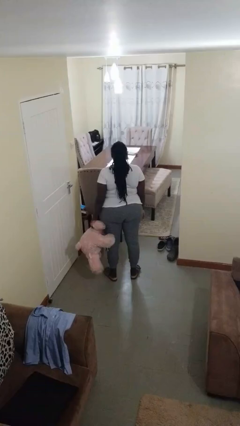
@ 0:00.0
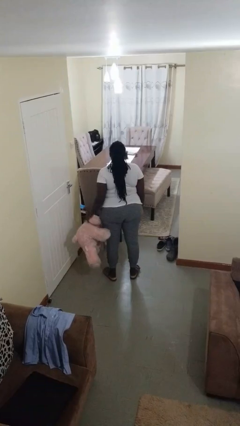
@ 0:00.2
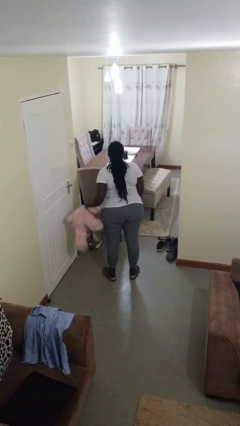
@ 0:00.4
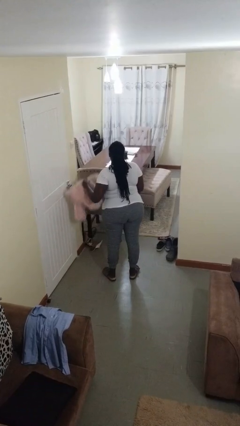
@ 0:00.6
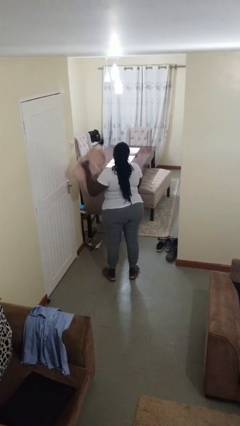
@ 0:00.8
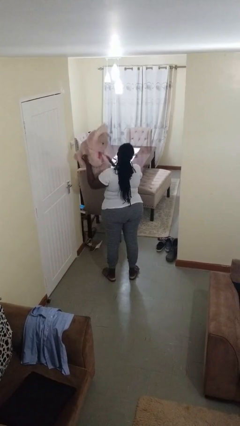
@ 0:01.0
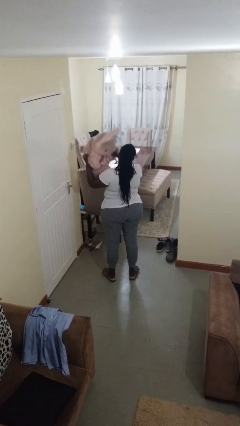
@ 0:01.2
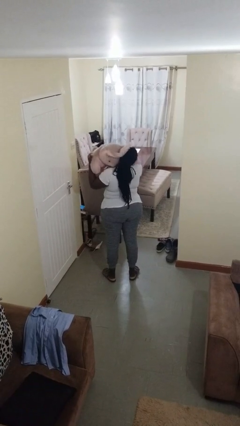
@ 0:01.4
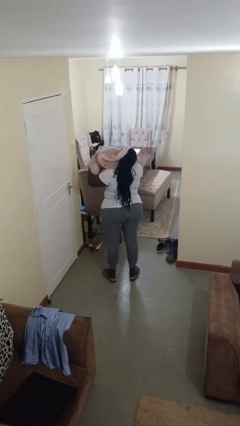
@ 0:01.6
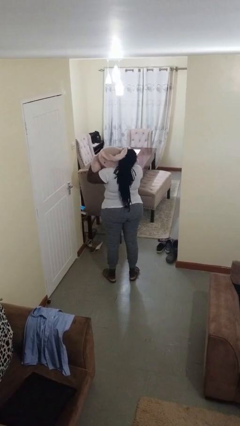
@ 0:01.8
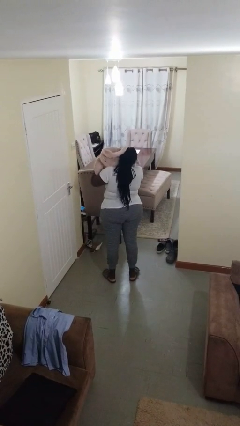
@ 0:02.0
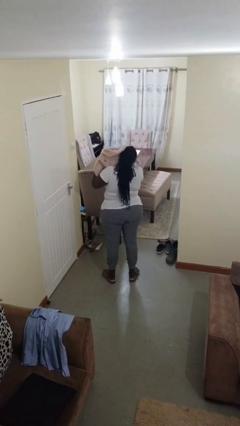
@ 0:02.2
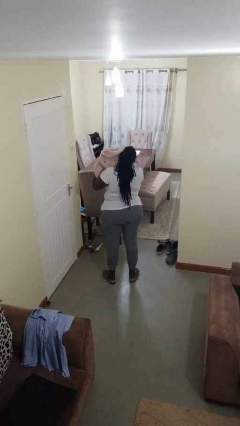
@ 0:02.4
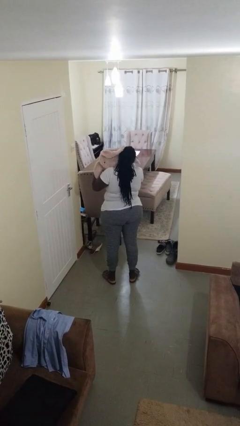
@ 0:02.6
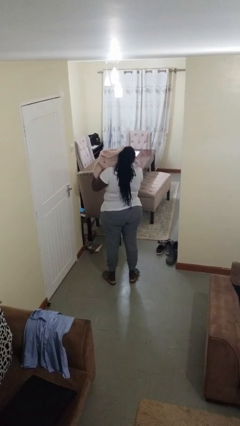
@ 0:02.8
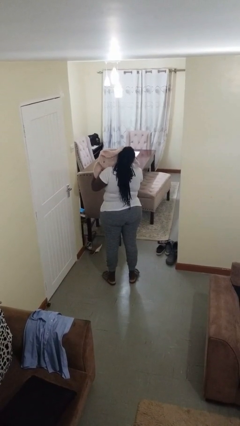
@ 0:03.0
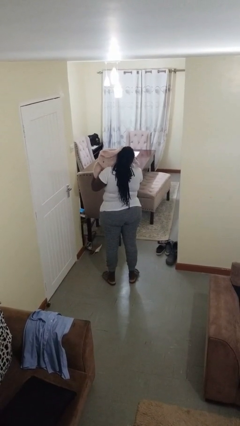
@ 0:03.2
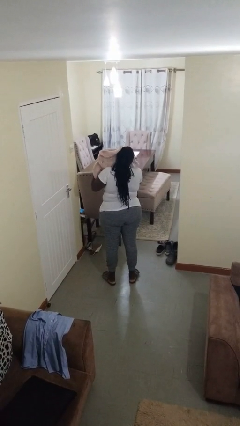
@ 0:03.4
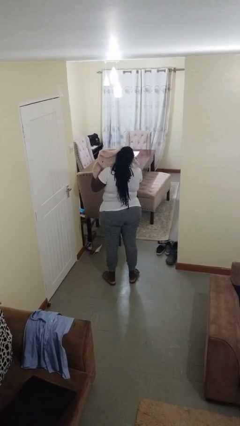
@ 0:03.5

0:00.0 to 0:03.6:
person hugs stuffed animal

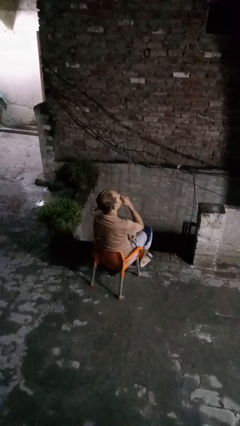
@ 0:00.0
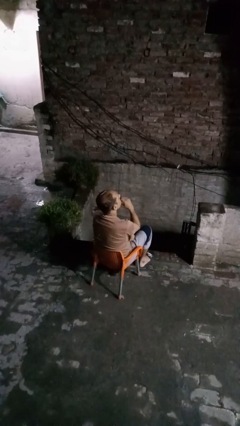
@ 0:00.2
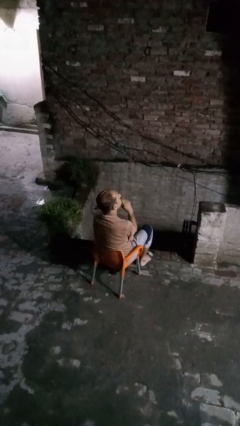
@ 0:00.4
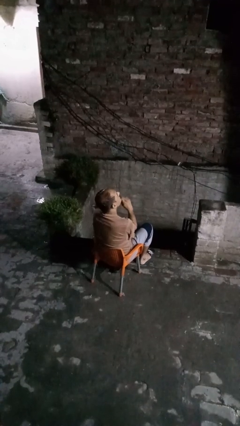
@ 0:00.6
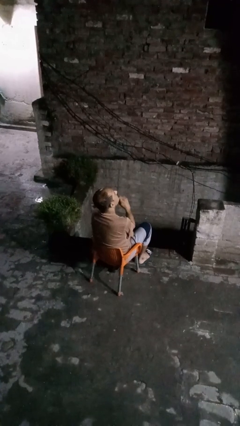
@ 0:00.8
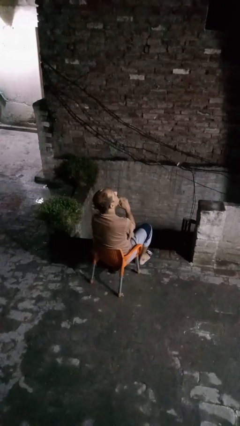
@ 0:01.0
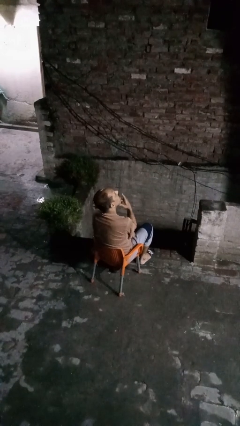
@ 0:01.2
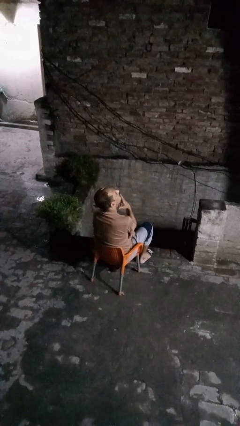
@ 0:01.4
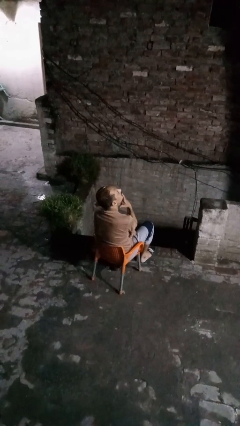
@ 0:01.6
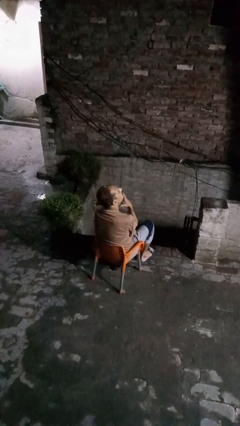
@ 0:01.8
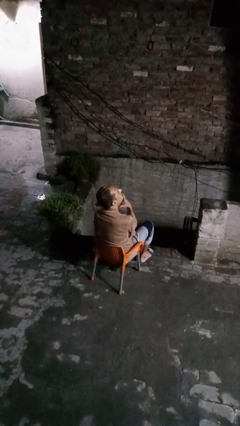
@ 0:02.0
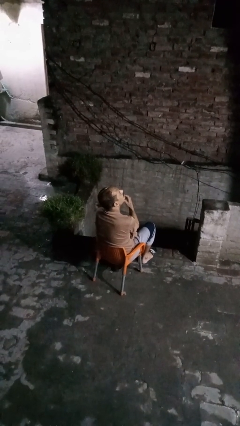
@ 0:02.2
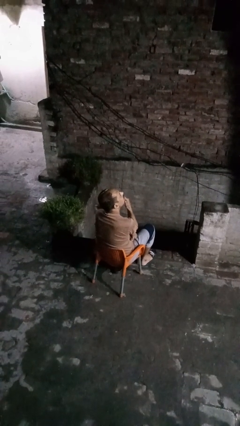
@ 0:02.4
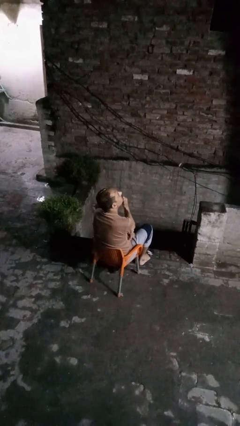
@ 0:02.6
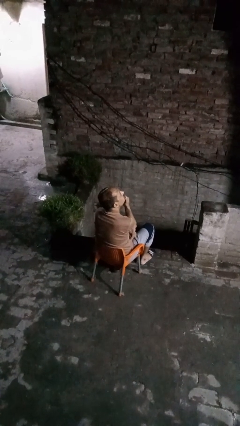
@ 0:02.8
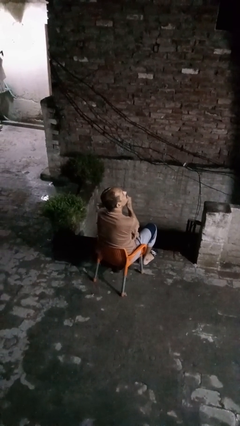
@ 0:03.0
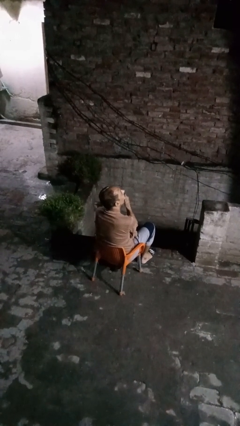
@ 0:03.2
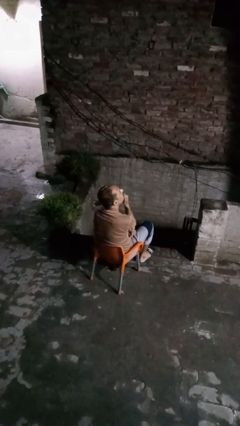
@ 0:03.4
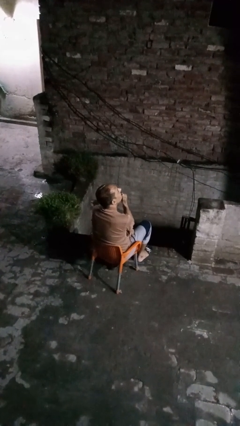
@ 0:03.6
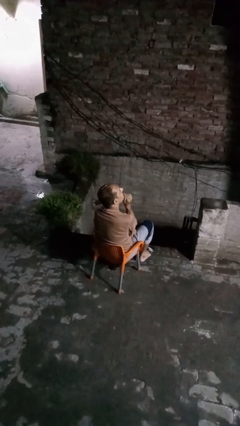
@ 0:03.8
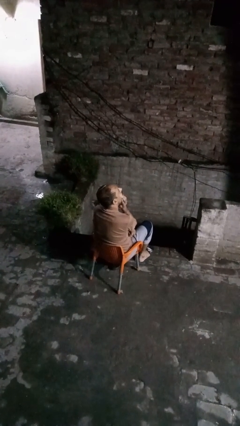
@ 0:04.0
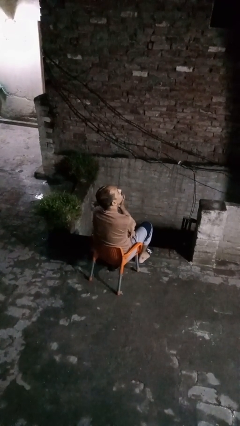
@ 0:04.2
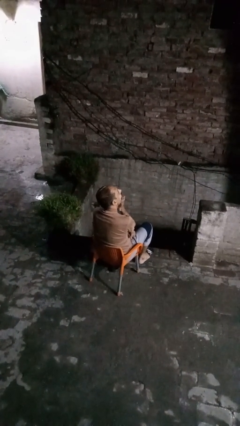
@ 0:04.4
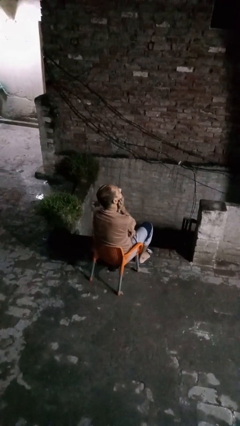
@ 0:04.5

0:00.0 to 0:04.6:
person strokes chin

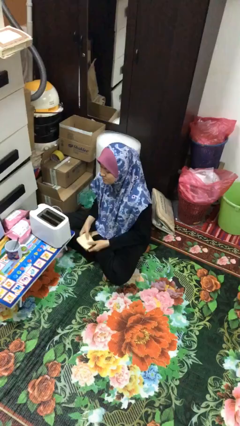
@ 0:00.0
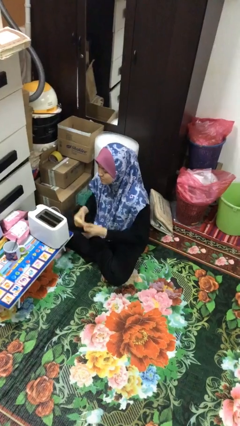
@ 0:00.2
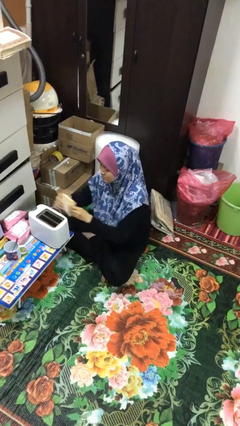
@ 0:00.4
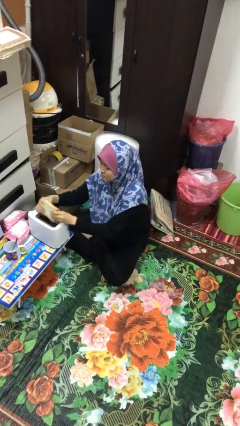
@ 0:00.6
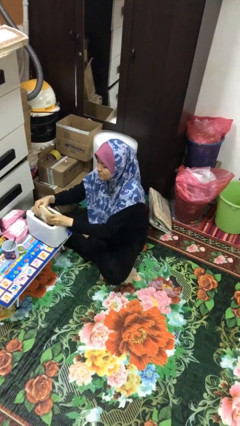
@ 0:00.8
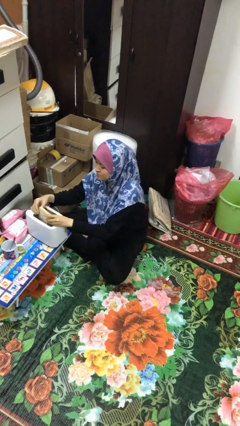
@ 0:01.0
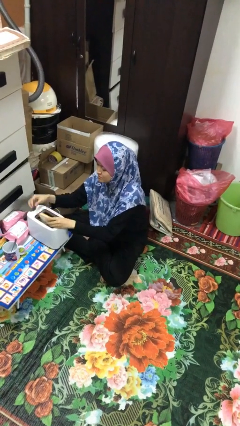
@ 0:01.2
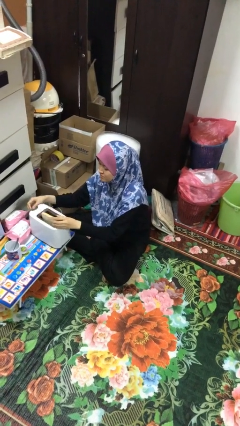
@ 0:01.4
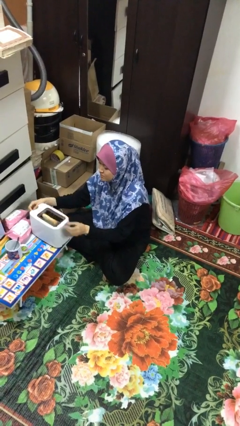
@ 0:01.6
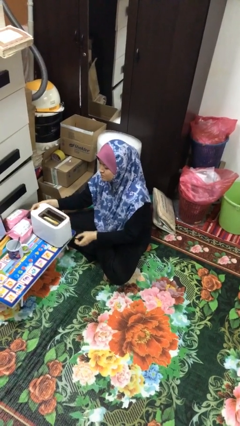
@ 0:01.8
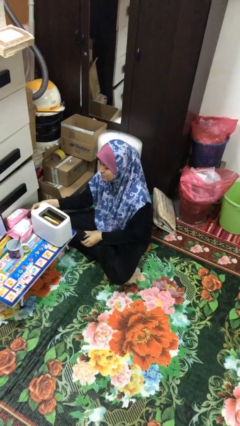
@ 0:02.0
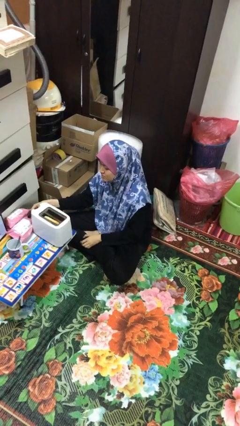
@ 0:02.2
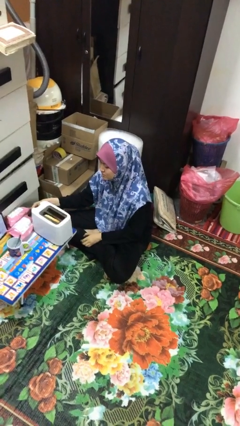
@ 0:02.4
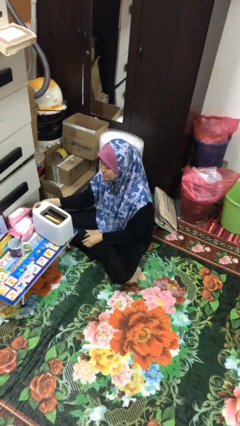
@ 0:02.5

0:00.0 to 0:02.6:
person puts object into toaster

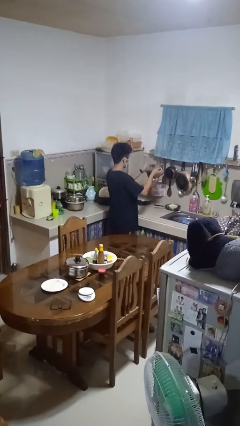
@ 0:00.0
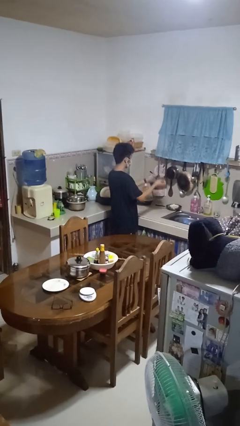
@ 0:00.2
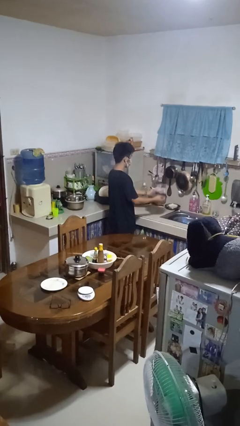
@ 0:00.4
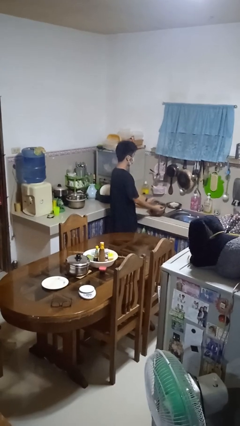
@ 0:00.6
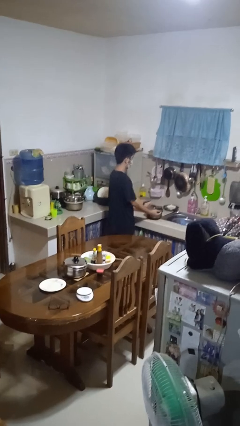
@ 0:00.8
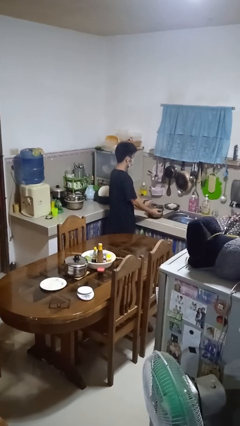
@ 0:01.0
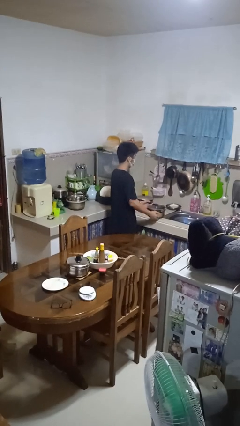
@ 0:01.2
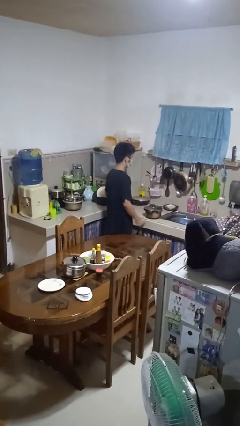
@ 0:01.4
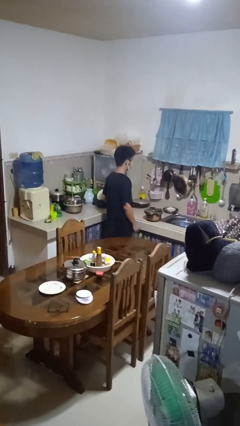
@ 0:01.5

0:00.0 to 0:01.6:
person puts down object on countertop

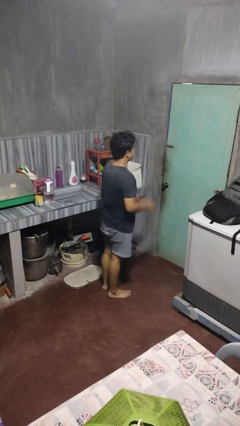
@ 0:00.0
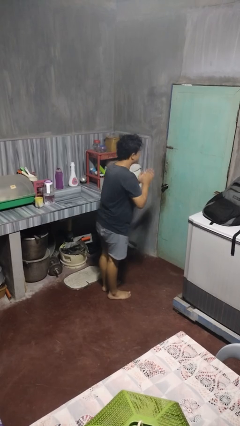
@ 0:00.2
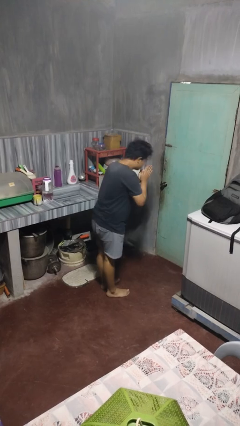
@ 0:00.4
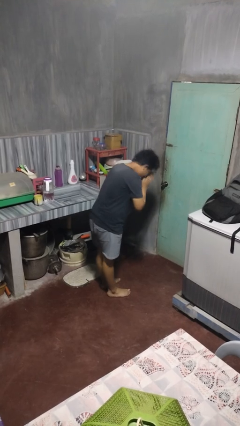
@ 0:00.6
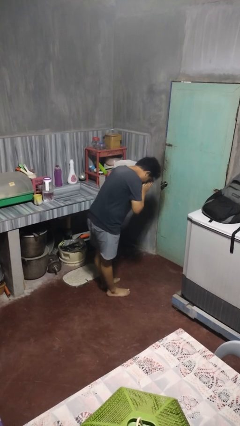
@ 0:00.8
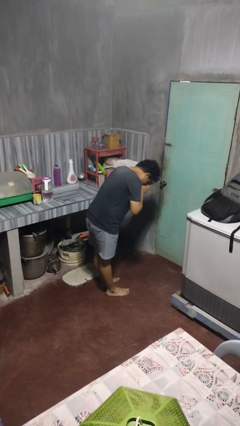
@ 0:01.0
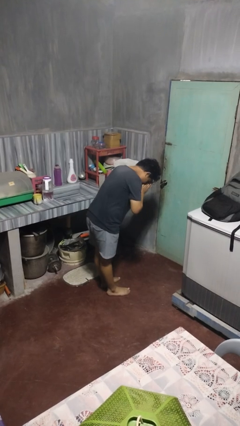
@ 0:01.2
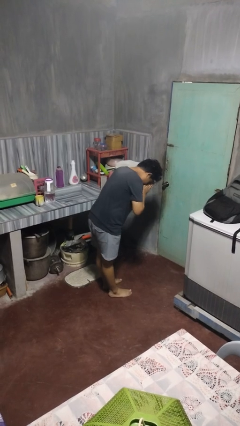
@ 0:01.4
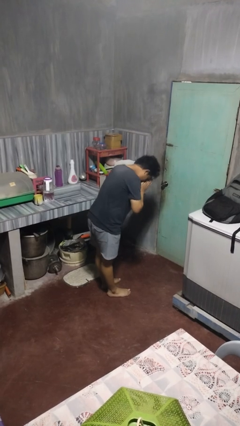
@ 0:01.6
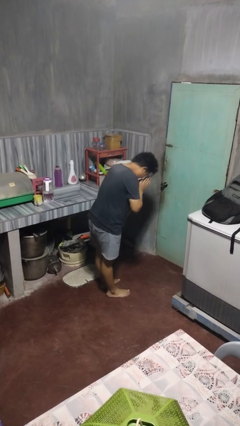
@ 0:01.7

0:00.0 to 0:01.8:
person prays

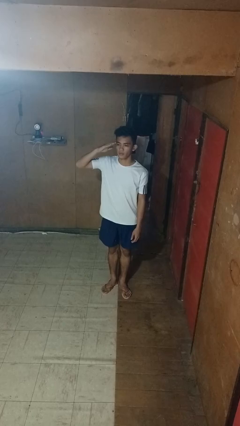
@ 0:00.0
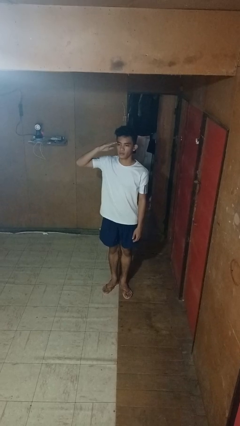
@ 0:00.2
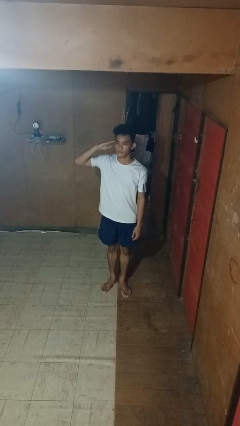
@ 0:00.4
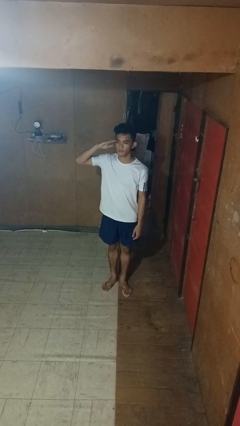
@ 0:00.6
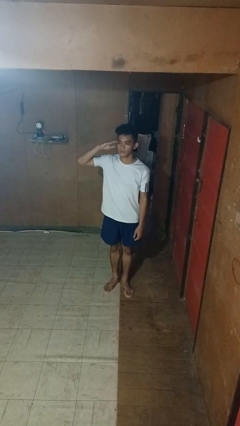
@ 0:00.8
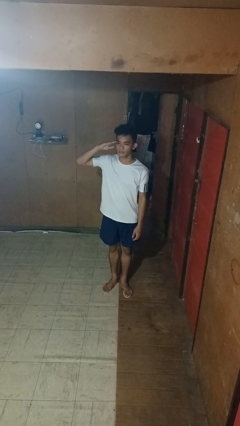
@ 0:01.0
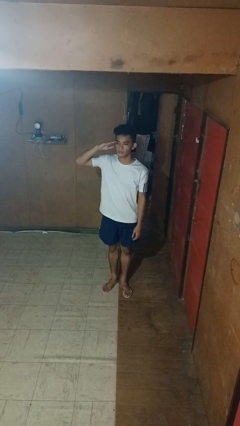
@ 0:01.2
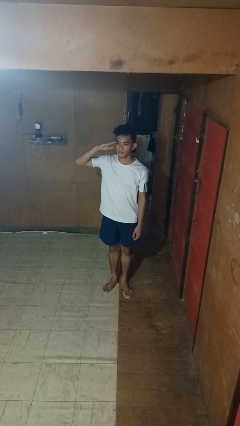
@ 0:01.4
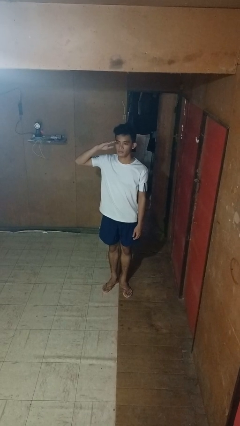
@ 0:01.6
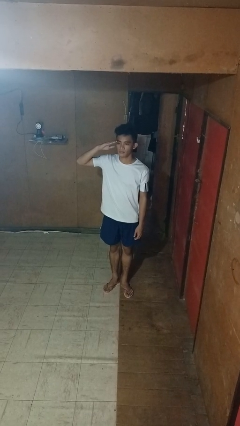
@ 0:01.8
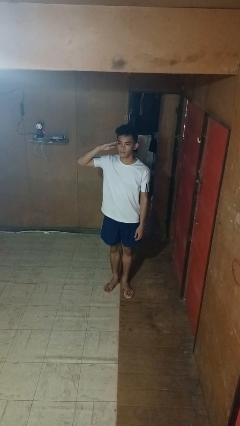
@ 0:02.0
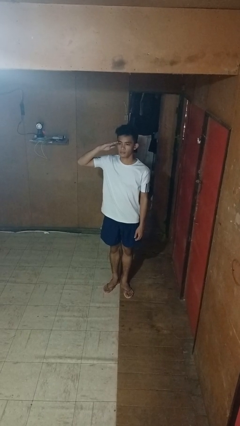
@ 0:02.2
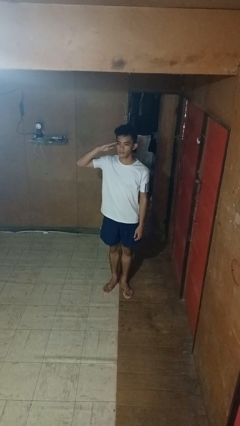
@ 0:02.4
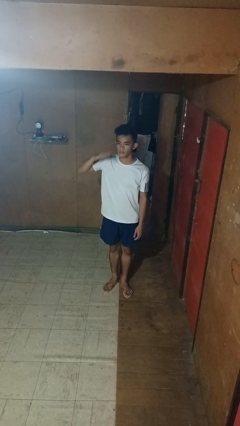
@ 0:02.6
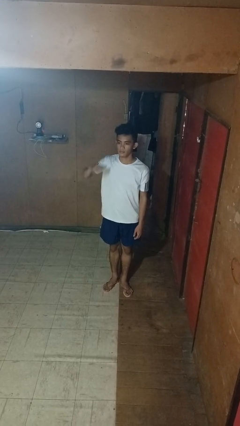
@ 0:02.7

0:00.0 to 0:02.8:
person salutes
